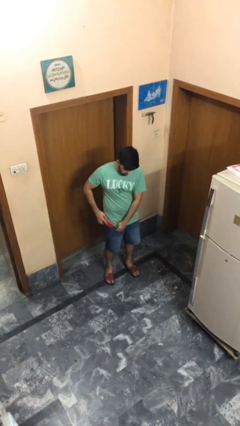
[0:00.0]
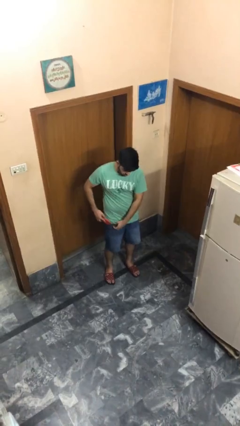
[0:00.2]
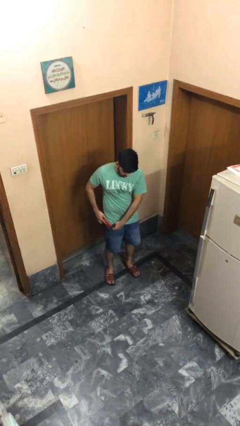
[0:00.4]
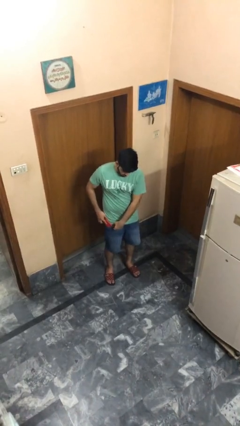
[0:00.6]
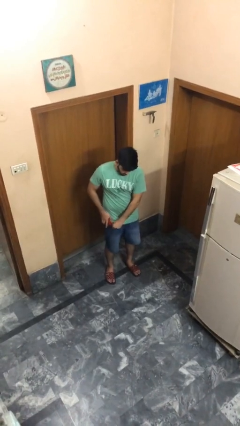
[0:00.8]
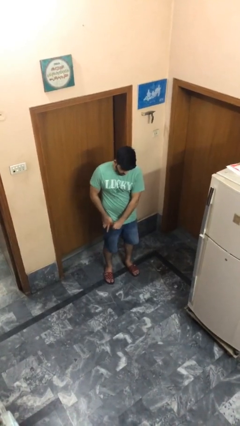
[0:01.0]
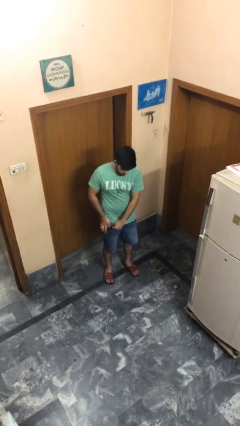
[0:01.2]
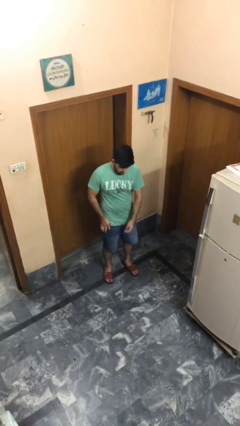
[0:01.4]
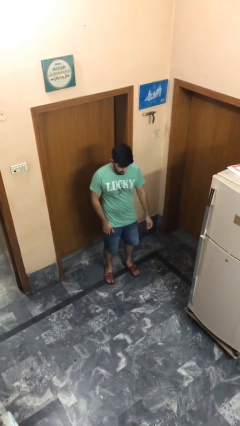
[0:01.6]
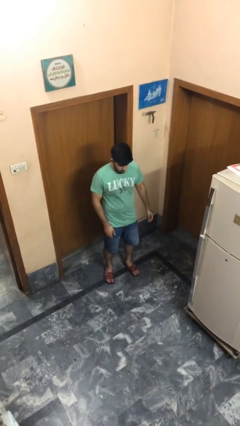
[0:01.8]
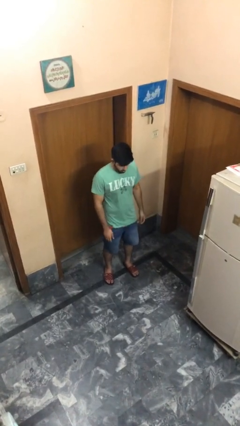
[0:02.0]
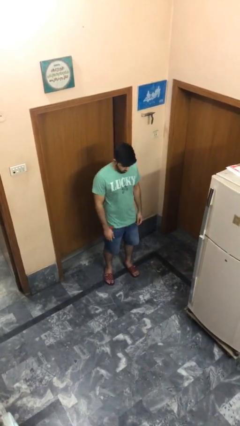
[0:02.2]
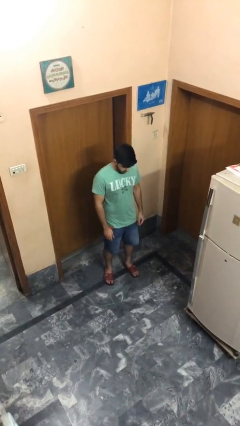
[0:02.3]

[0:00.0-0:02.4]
person puts phone into pocket

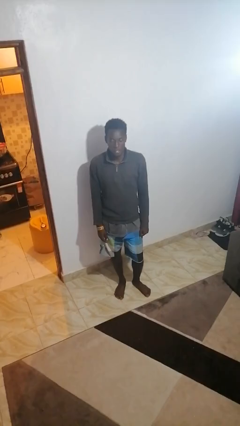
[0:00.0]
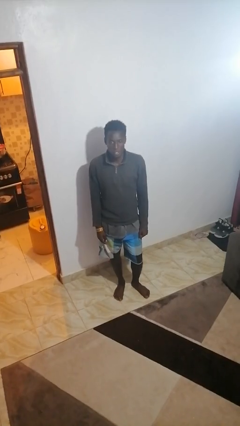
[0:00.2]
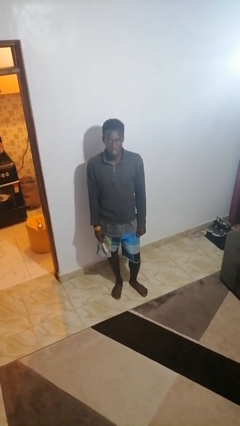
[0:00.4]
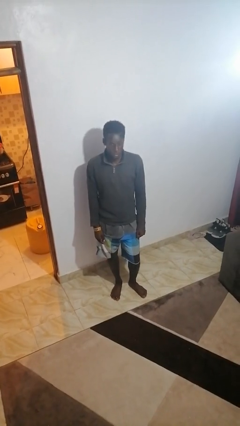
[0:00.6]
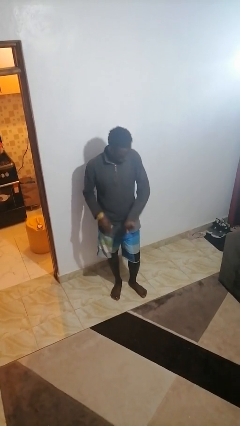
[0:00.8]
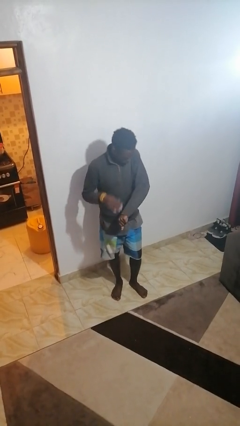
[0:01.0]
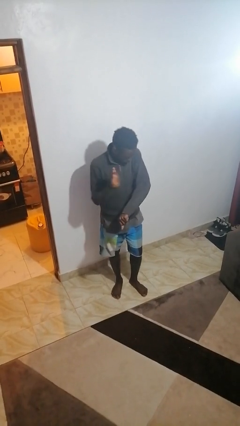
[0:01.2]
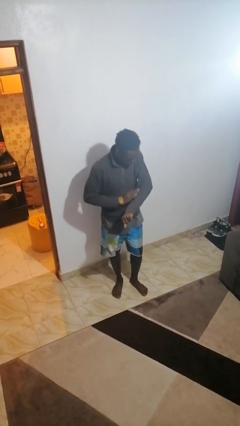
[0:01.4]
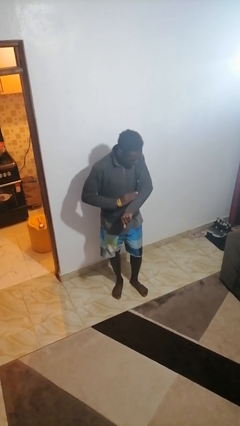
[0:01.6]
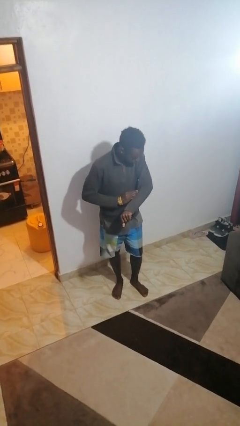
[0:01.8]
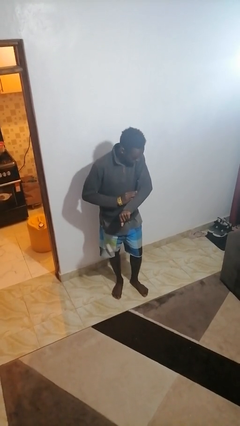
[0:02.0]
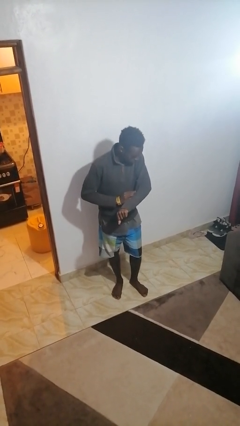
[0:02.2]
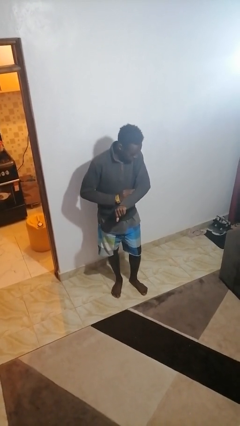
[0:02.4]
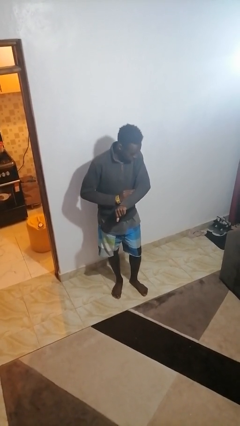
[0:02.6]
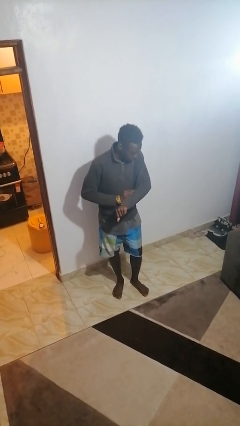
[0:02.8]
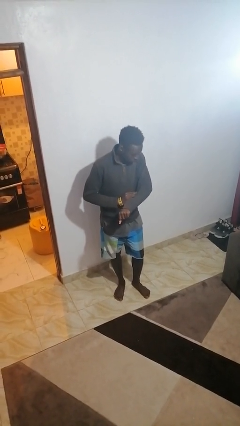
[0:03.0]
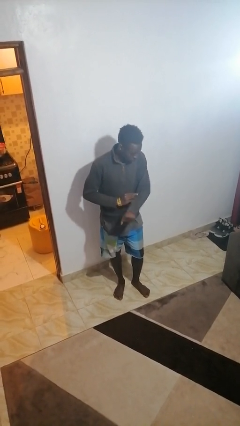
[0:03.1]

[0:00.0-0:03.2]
person swats bug

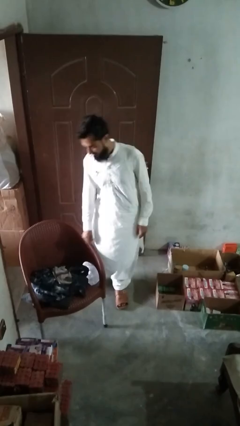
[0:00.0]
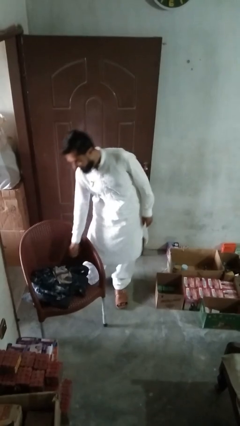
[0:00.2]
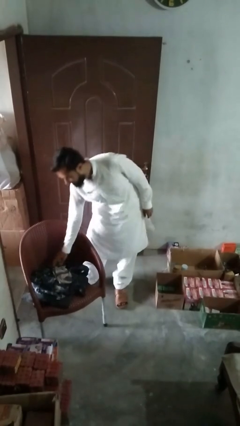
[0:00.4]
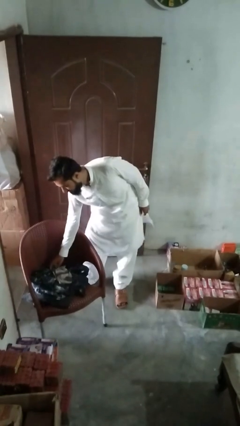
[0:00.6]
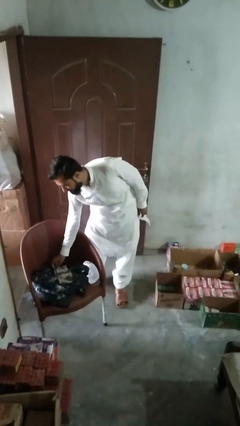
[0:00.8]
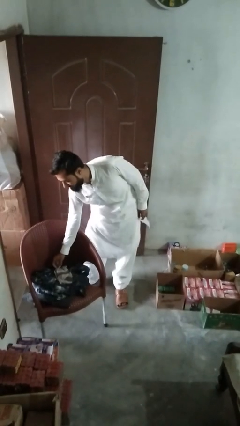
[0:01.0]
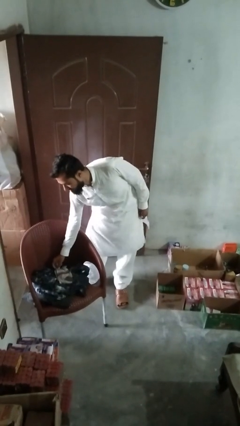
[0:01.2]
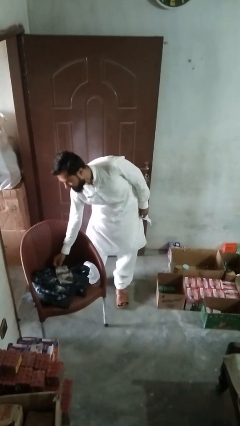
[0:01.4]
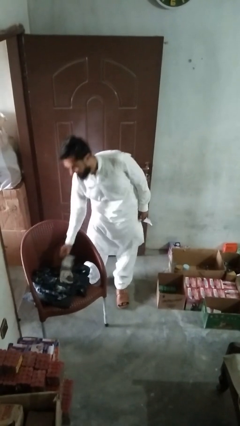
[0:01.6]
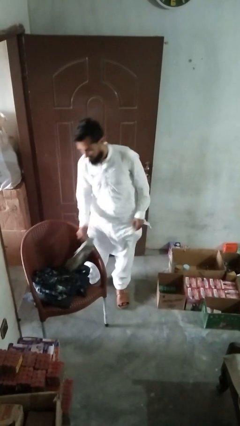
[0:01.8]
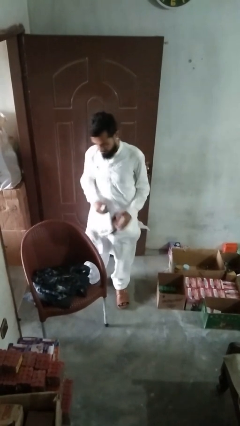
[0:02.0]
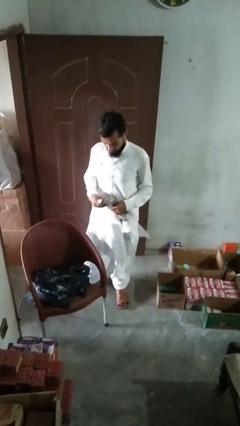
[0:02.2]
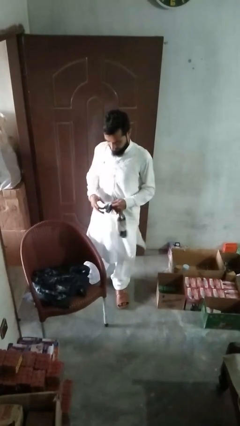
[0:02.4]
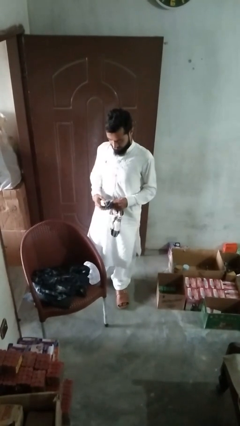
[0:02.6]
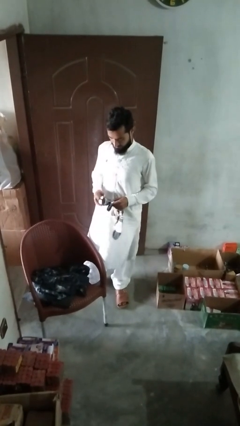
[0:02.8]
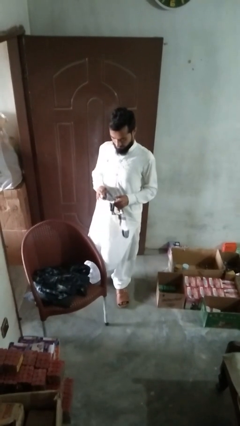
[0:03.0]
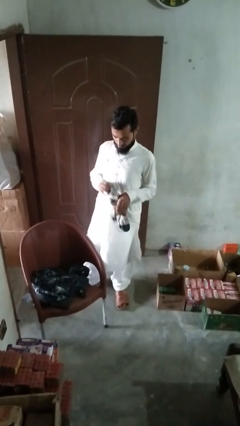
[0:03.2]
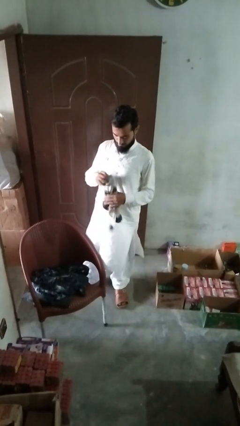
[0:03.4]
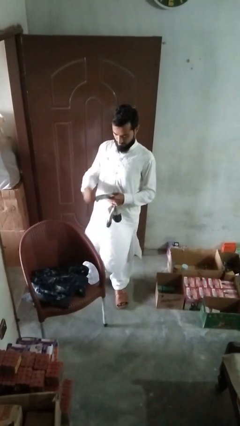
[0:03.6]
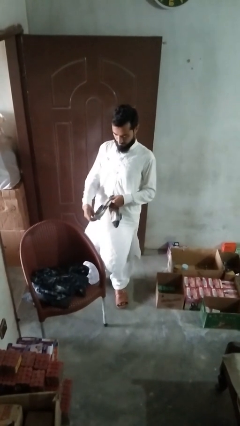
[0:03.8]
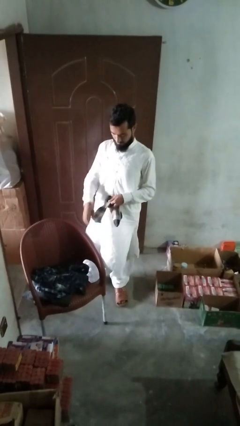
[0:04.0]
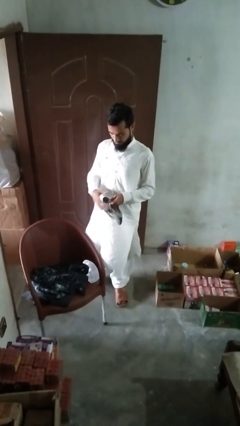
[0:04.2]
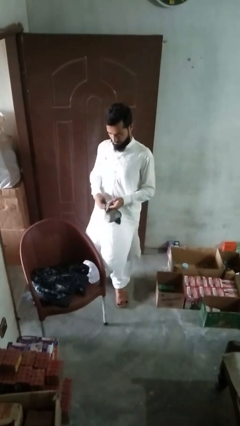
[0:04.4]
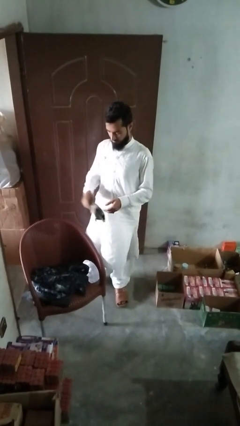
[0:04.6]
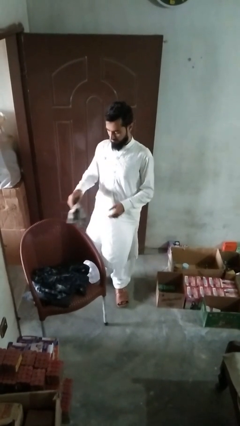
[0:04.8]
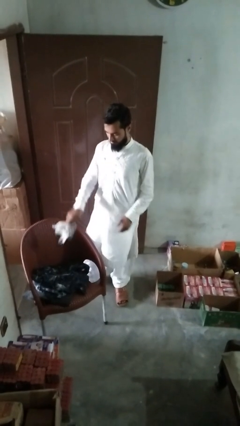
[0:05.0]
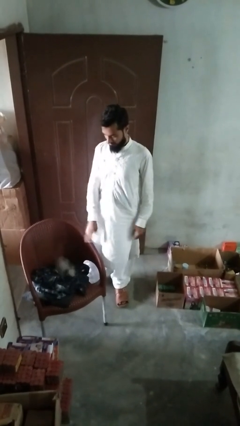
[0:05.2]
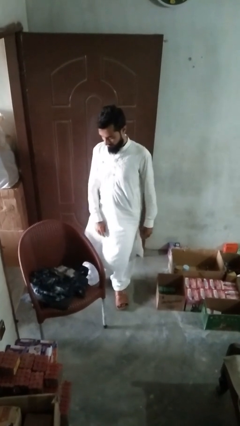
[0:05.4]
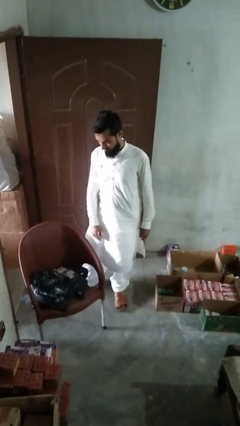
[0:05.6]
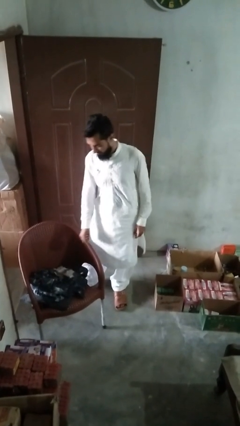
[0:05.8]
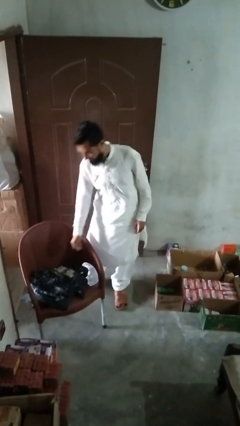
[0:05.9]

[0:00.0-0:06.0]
person folds socks

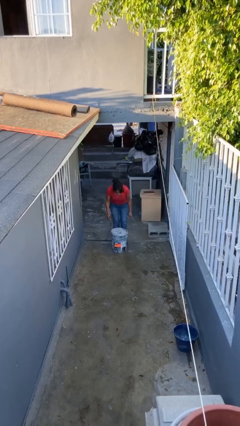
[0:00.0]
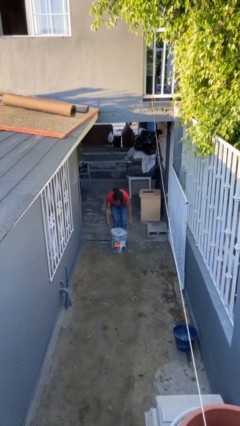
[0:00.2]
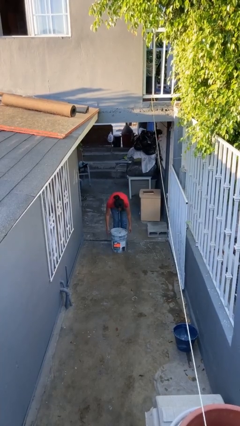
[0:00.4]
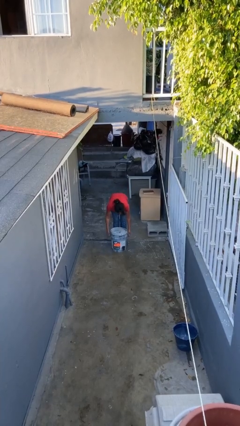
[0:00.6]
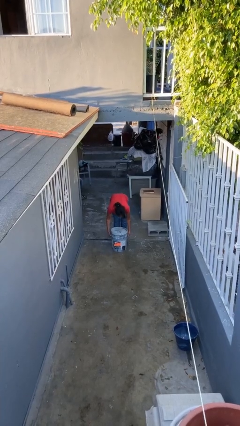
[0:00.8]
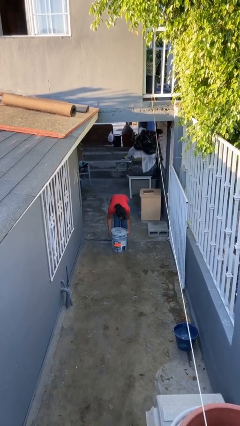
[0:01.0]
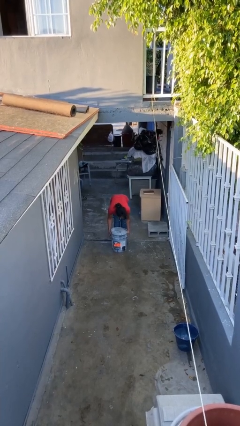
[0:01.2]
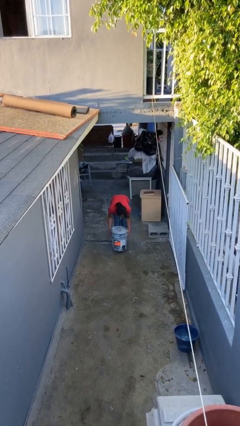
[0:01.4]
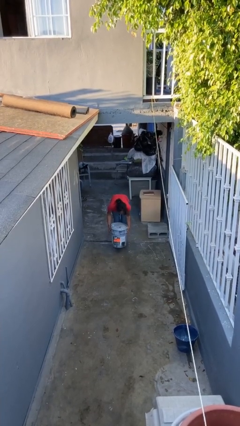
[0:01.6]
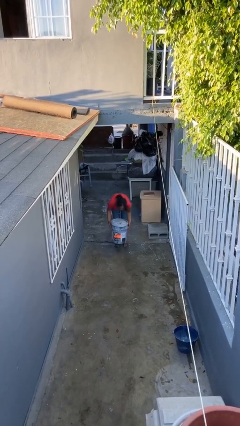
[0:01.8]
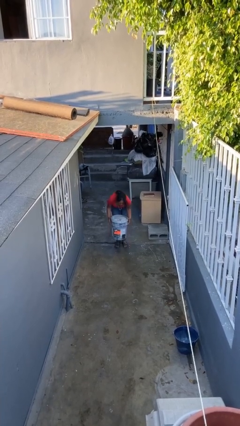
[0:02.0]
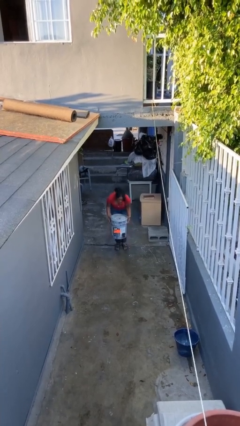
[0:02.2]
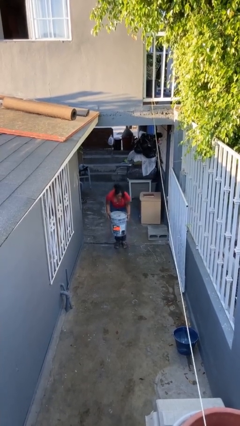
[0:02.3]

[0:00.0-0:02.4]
person picks up object from floor

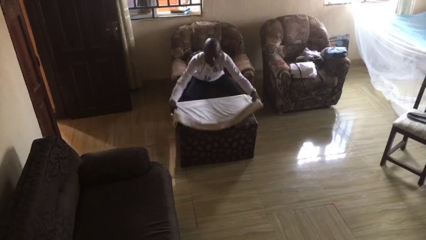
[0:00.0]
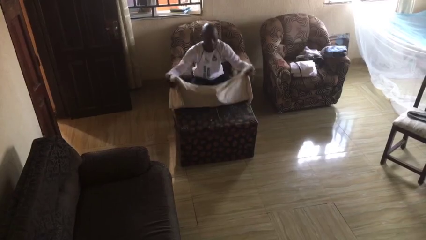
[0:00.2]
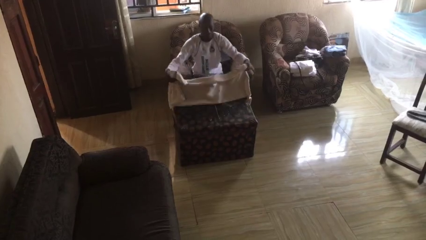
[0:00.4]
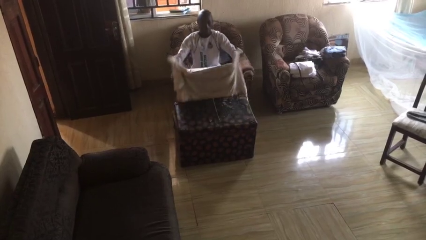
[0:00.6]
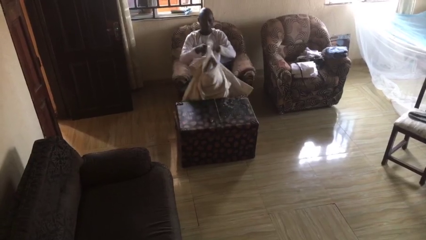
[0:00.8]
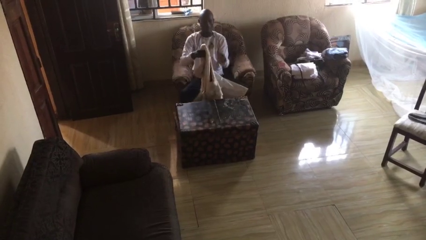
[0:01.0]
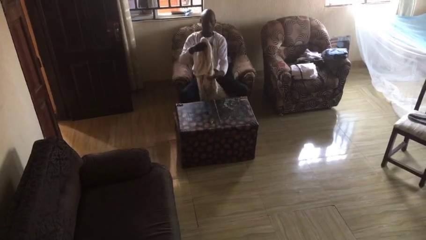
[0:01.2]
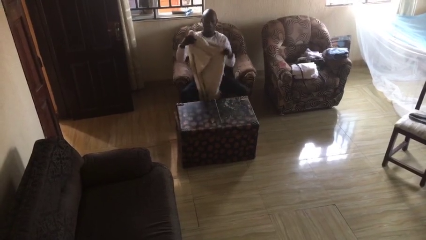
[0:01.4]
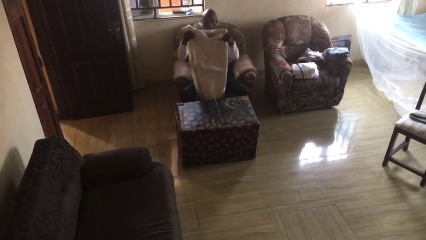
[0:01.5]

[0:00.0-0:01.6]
person folds tablecloth

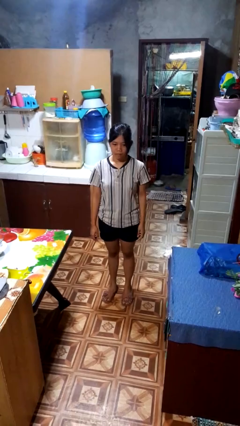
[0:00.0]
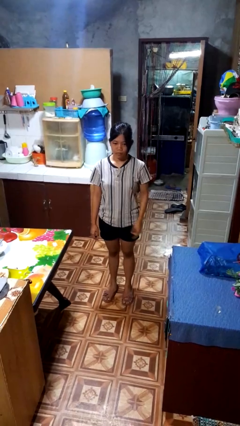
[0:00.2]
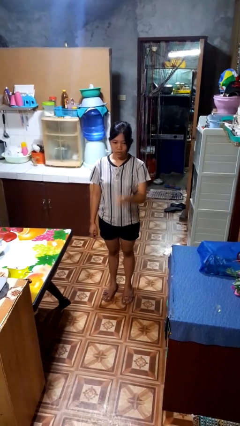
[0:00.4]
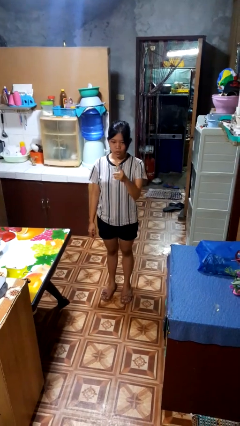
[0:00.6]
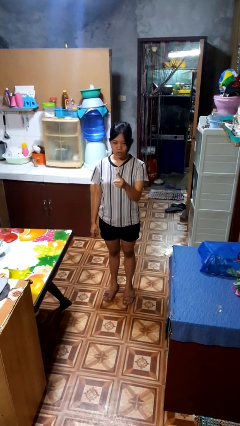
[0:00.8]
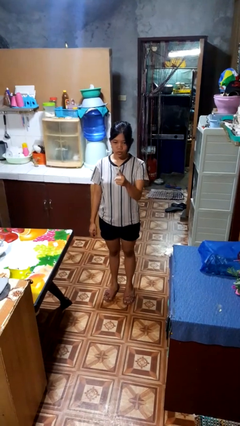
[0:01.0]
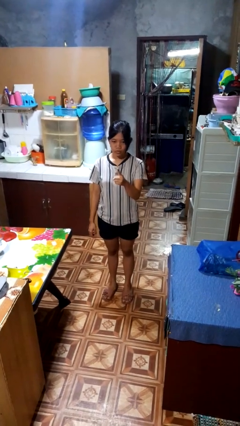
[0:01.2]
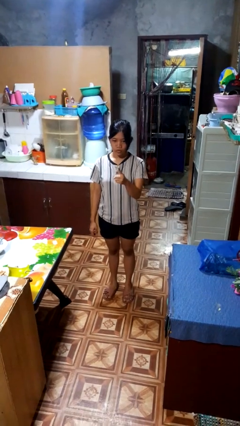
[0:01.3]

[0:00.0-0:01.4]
person gestures number one

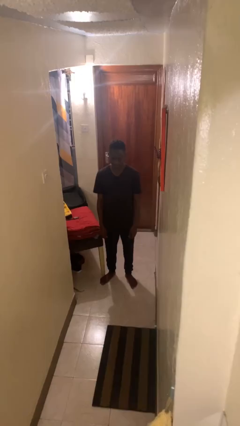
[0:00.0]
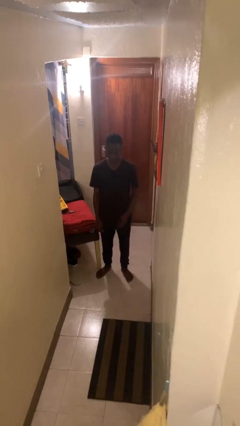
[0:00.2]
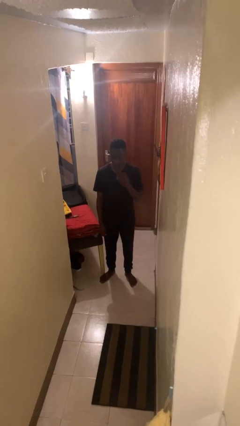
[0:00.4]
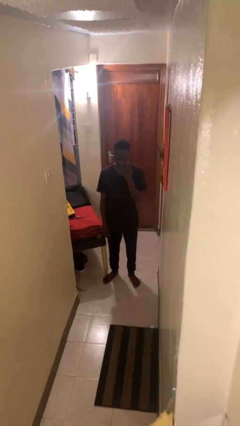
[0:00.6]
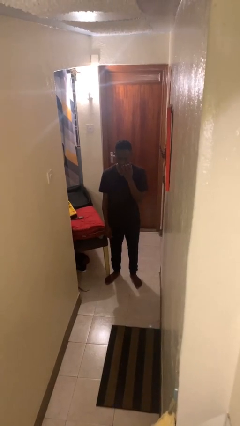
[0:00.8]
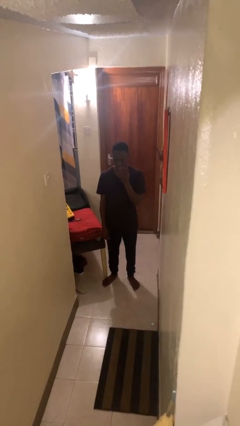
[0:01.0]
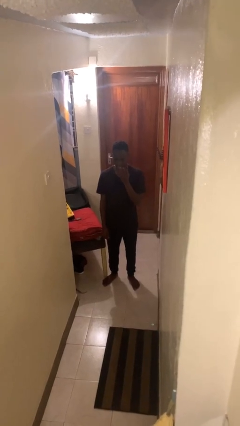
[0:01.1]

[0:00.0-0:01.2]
person licks fingers
